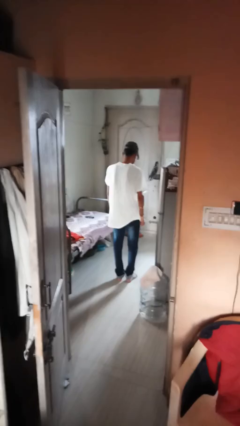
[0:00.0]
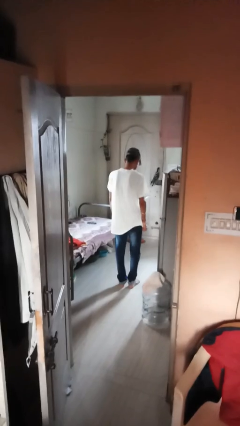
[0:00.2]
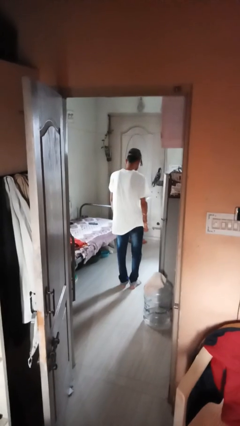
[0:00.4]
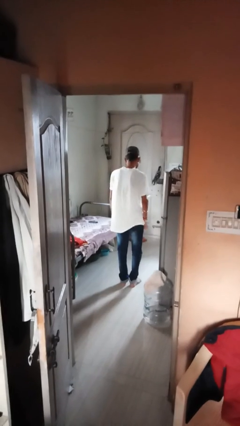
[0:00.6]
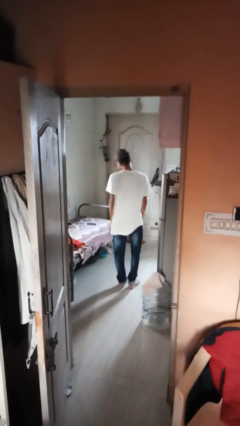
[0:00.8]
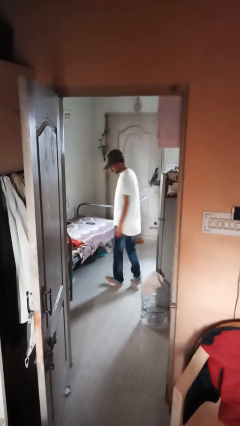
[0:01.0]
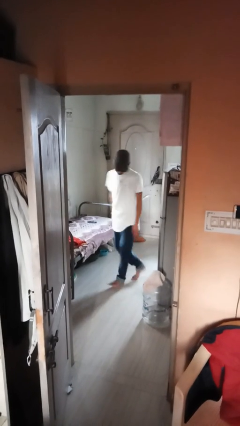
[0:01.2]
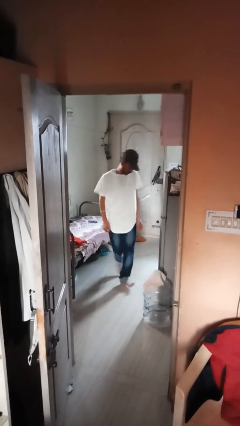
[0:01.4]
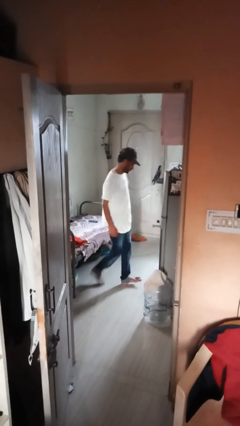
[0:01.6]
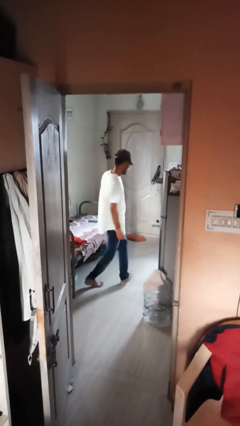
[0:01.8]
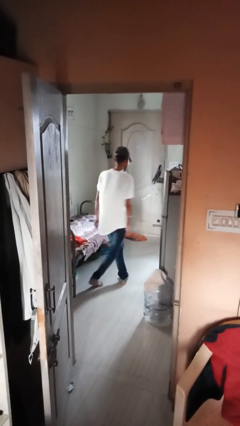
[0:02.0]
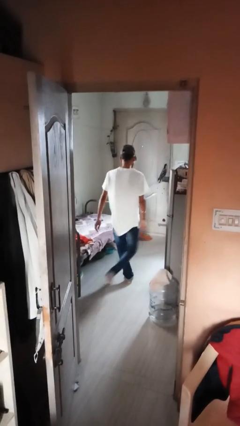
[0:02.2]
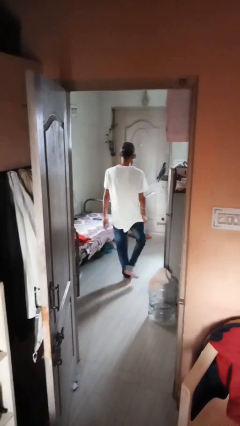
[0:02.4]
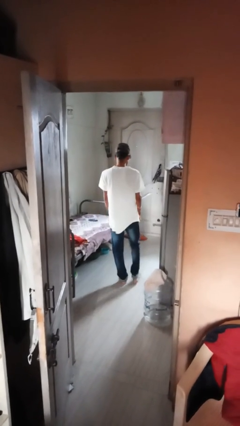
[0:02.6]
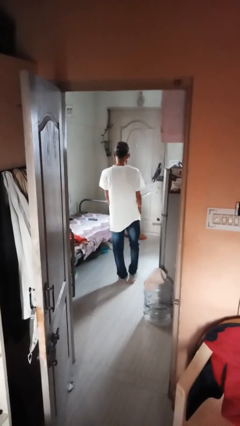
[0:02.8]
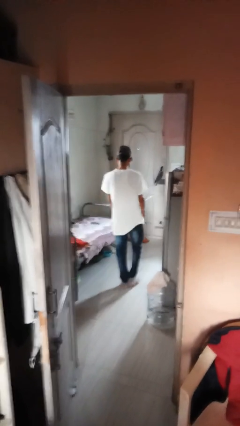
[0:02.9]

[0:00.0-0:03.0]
person twirls

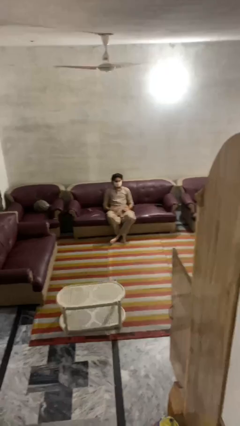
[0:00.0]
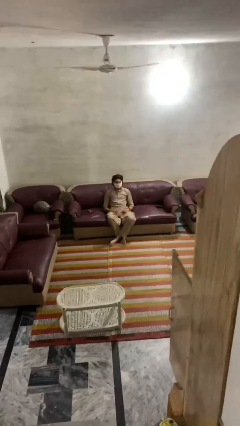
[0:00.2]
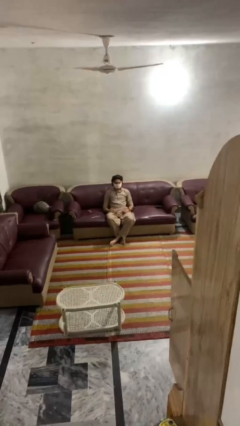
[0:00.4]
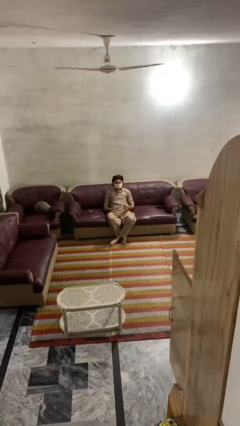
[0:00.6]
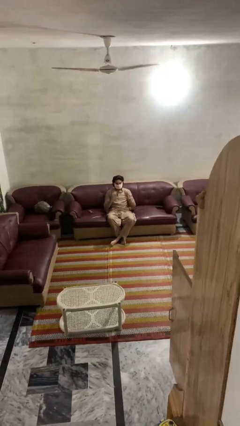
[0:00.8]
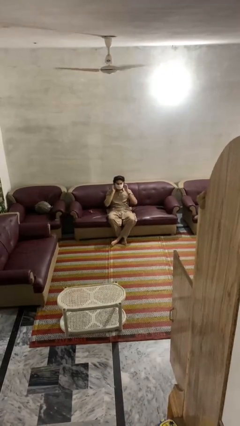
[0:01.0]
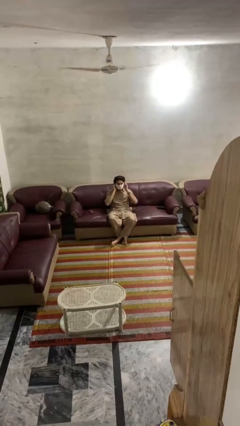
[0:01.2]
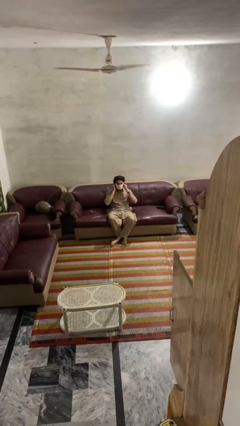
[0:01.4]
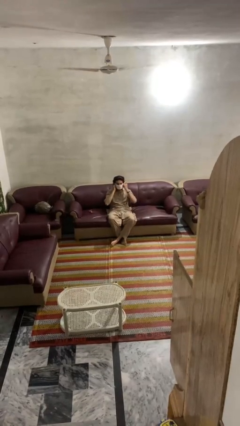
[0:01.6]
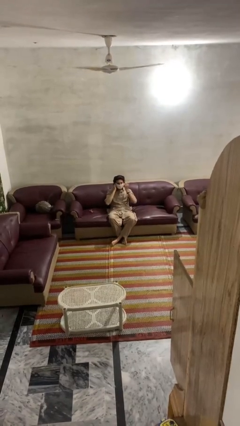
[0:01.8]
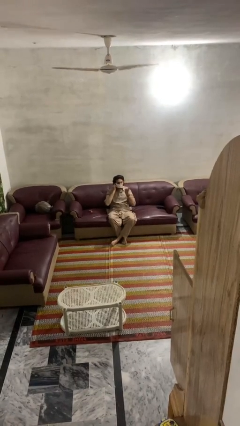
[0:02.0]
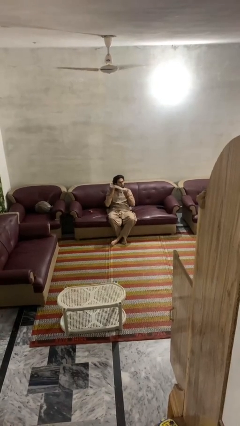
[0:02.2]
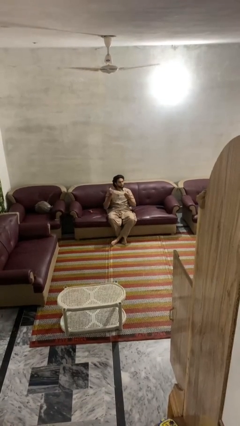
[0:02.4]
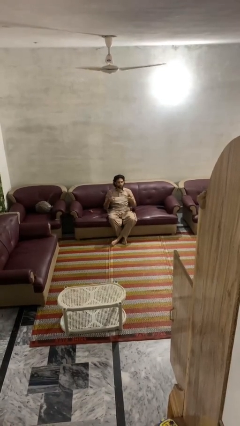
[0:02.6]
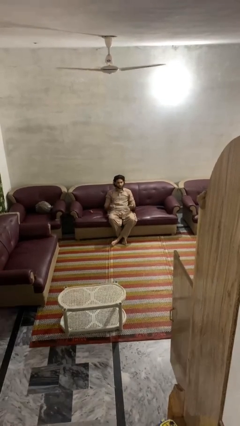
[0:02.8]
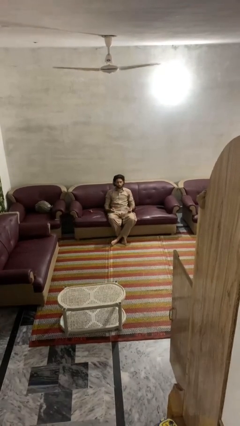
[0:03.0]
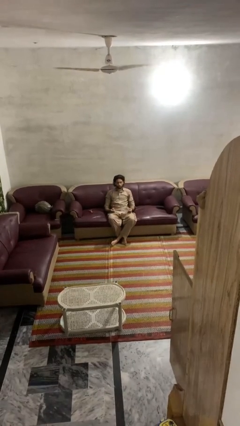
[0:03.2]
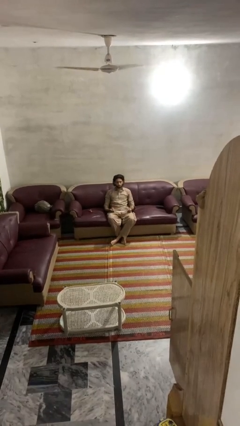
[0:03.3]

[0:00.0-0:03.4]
person takes off facemask

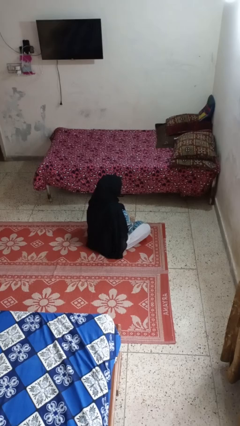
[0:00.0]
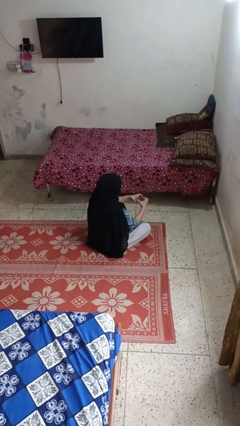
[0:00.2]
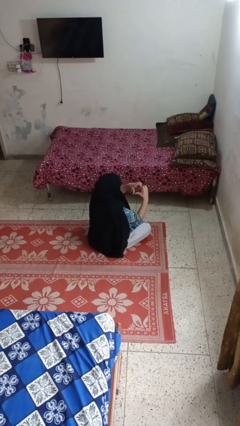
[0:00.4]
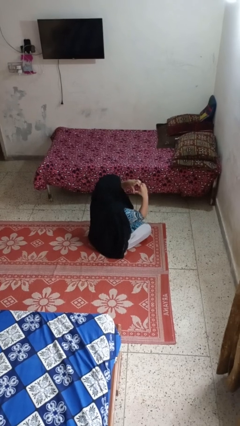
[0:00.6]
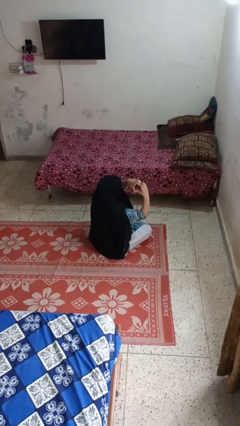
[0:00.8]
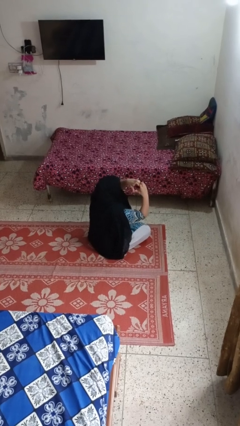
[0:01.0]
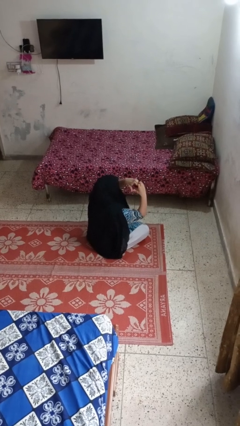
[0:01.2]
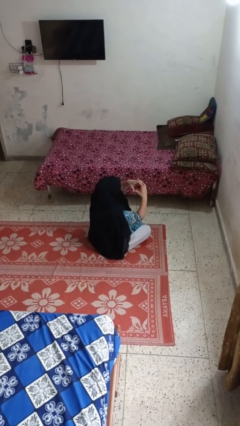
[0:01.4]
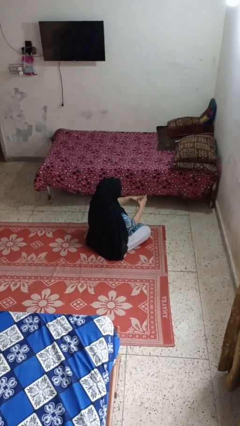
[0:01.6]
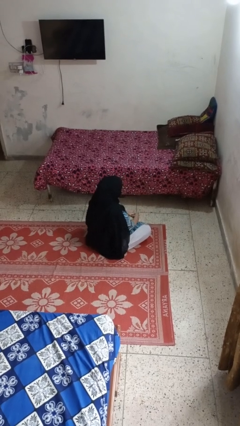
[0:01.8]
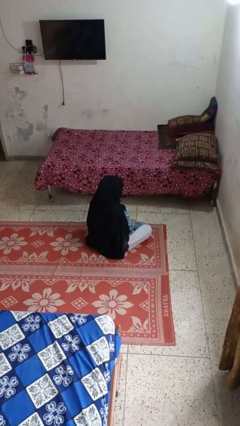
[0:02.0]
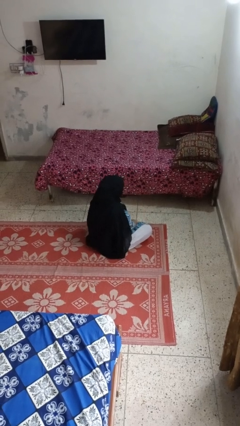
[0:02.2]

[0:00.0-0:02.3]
person gestures heart

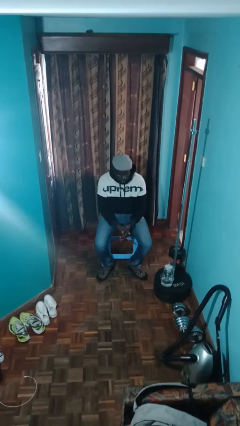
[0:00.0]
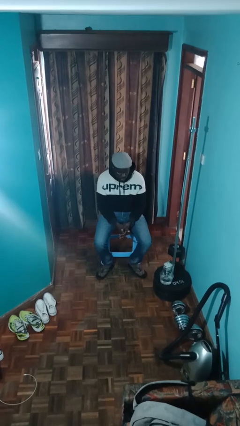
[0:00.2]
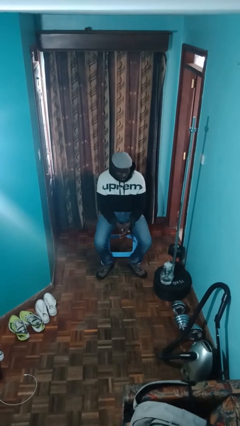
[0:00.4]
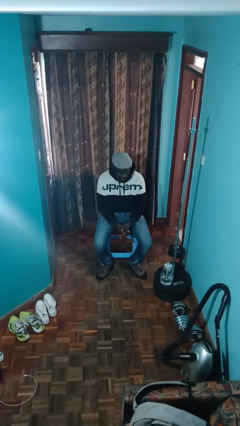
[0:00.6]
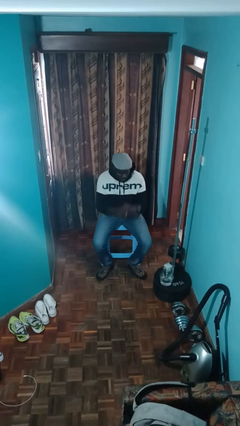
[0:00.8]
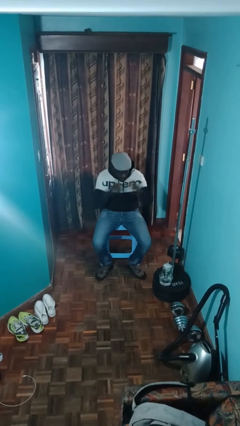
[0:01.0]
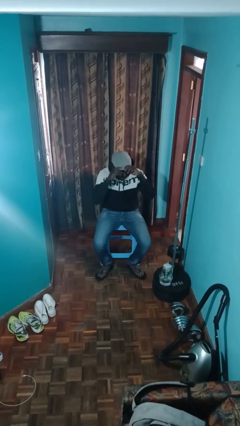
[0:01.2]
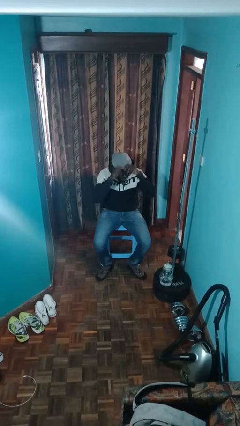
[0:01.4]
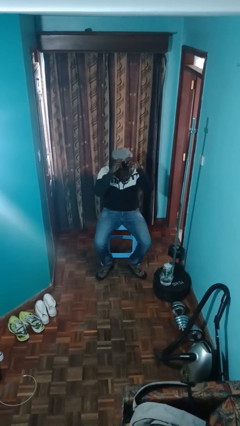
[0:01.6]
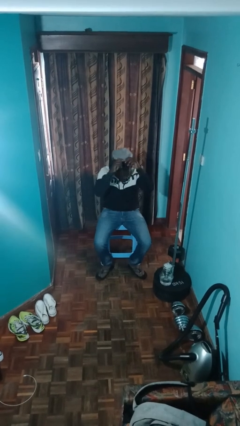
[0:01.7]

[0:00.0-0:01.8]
person takes off hat

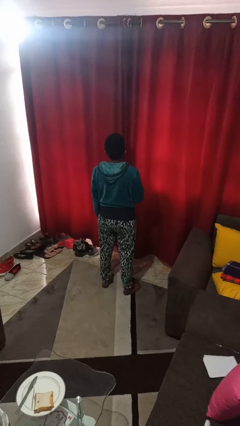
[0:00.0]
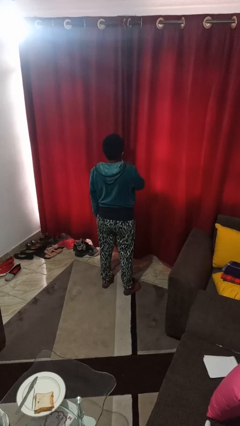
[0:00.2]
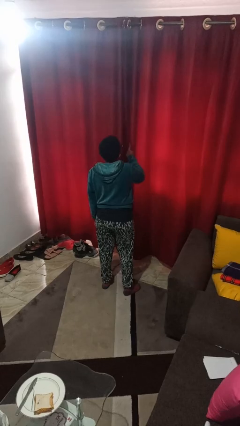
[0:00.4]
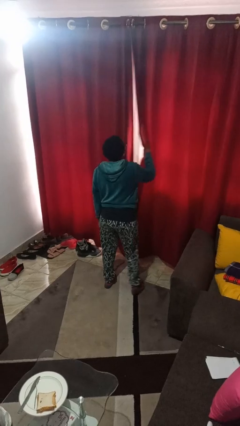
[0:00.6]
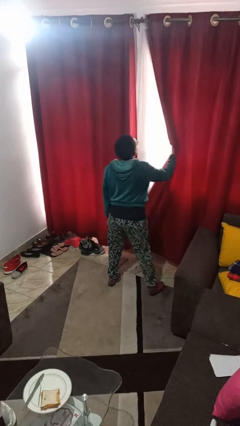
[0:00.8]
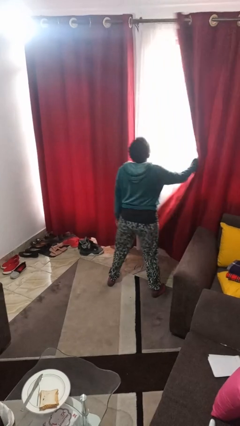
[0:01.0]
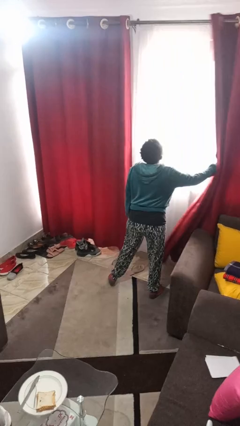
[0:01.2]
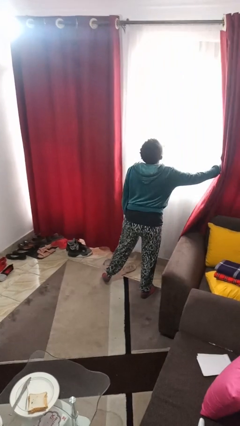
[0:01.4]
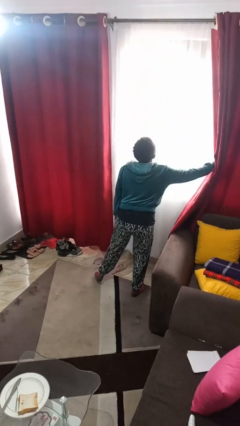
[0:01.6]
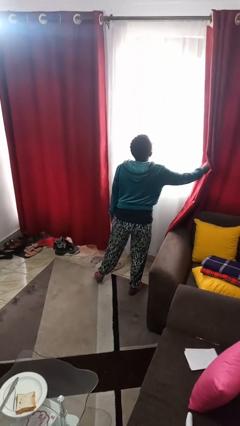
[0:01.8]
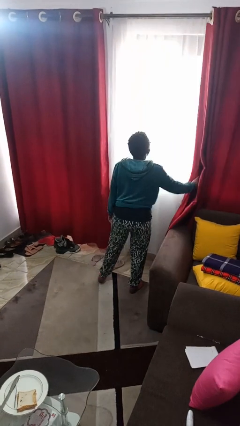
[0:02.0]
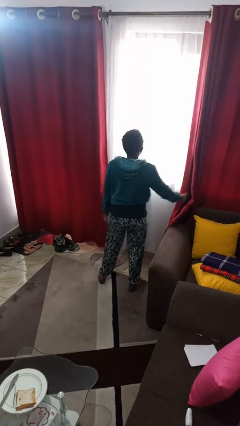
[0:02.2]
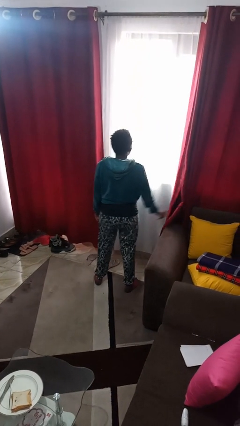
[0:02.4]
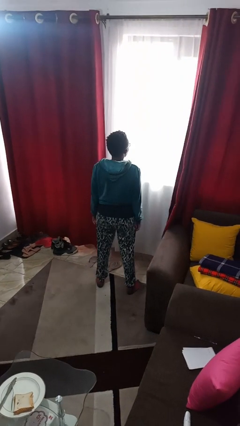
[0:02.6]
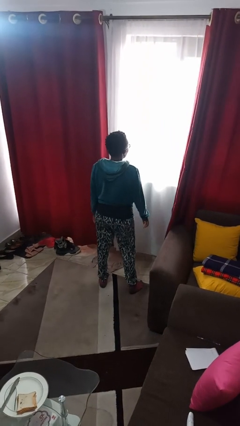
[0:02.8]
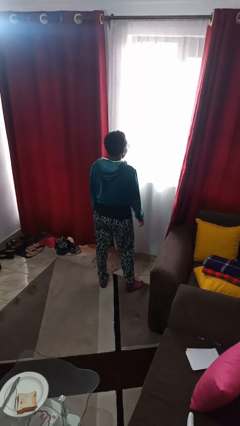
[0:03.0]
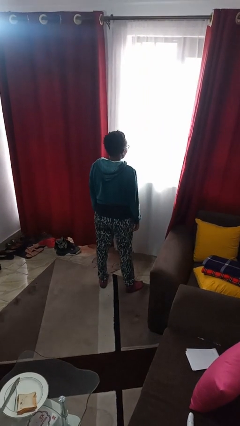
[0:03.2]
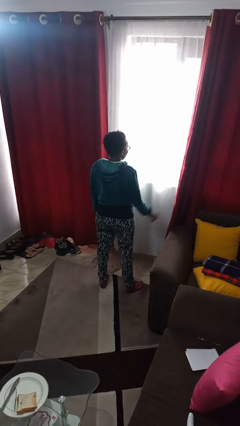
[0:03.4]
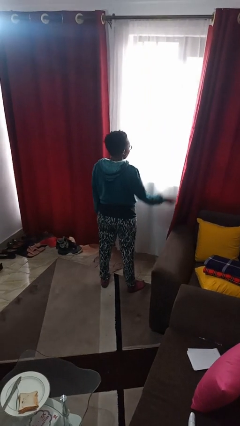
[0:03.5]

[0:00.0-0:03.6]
person opens curtains

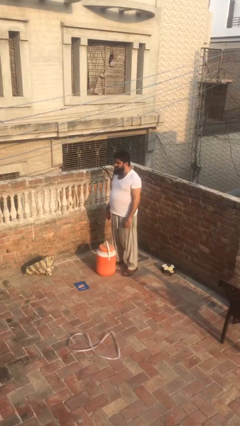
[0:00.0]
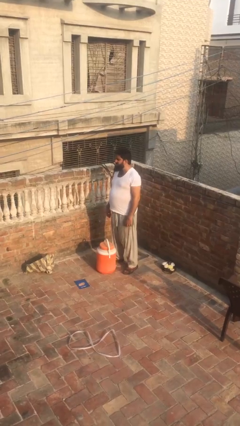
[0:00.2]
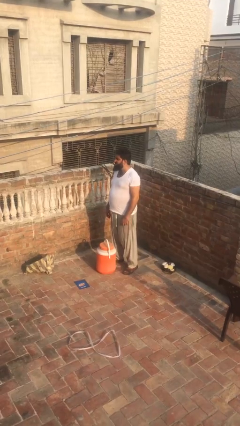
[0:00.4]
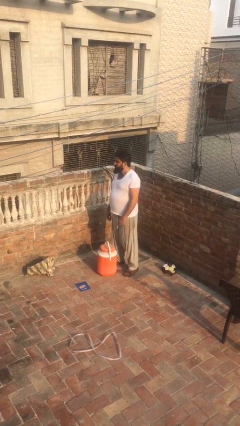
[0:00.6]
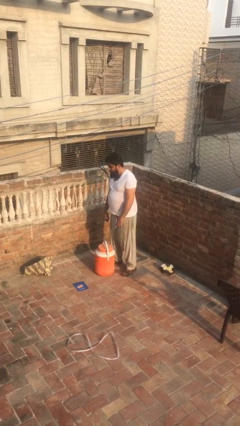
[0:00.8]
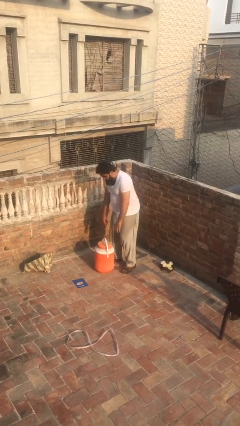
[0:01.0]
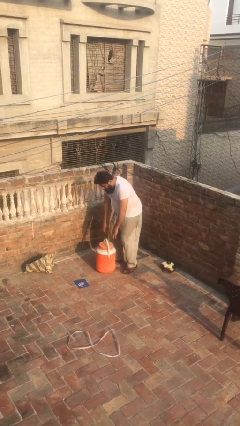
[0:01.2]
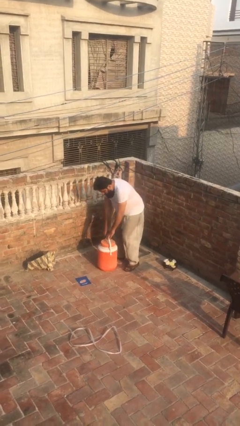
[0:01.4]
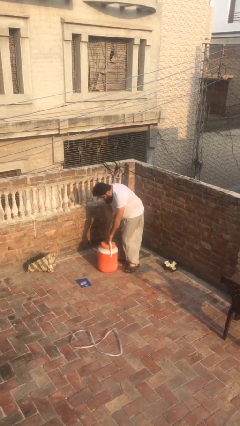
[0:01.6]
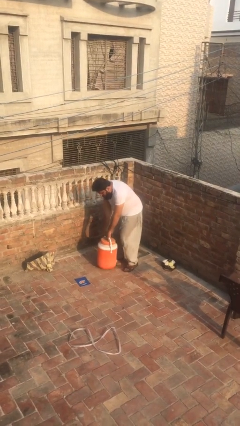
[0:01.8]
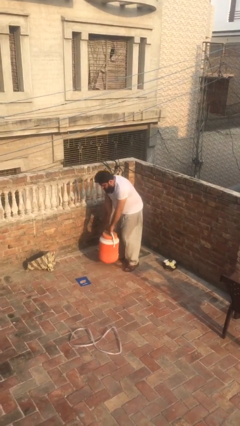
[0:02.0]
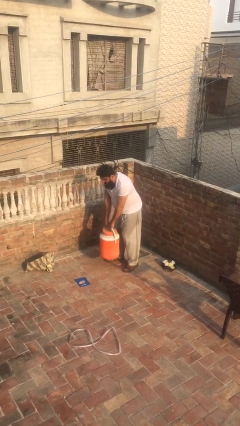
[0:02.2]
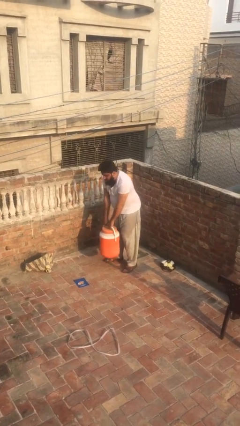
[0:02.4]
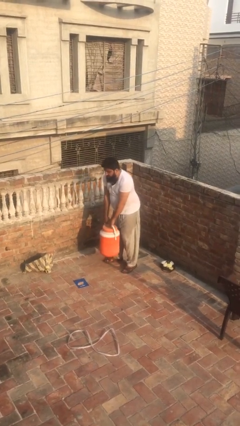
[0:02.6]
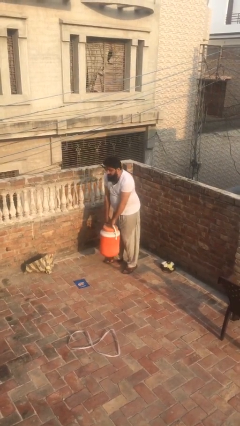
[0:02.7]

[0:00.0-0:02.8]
person picks up object from floor
